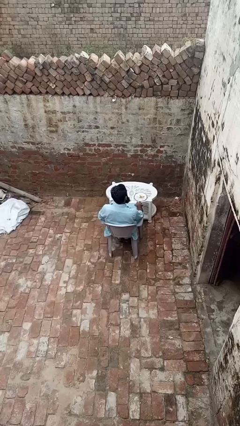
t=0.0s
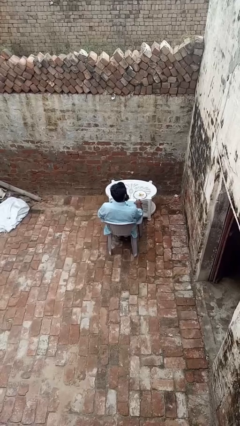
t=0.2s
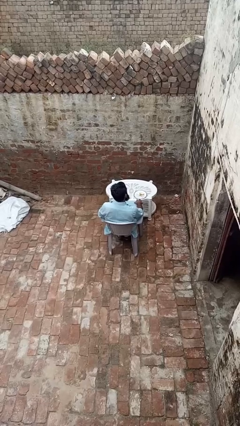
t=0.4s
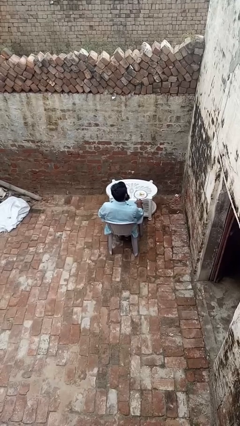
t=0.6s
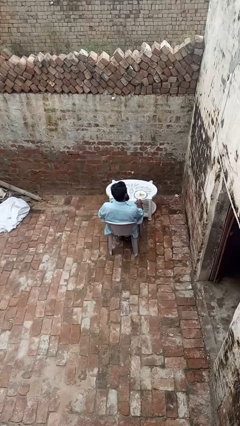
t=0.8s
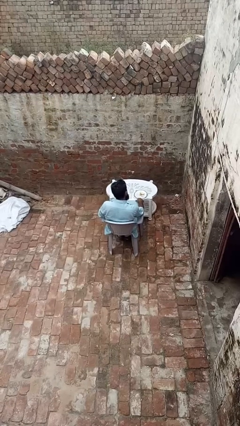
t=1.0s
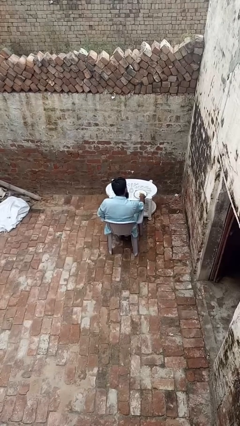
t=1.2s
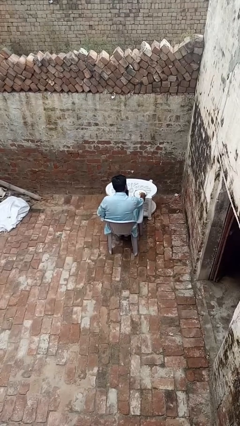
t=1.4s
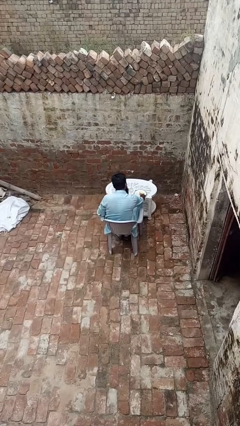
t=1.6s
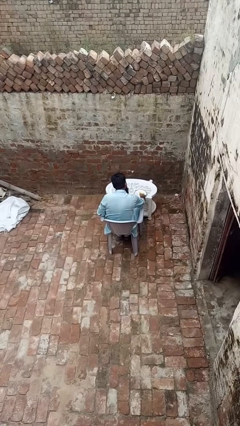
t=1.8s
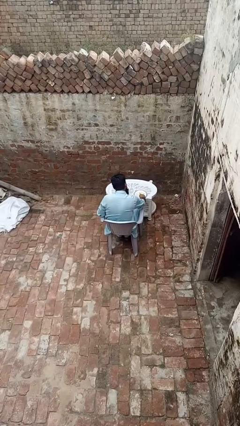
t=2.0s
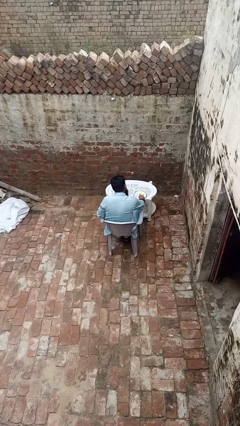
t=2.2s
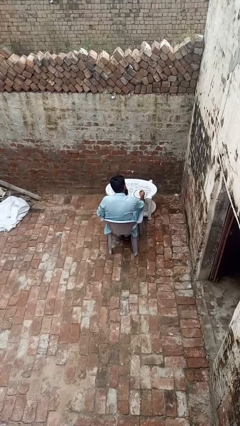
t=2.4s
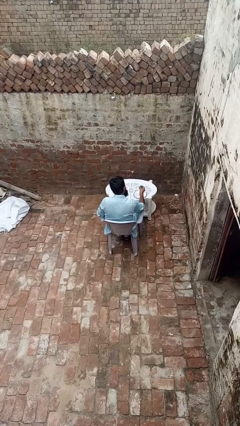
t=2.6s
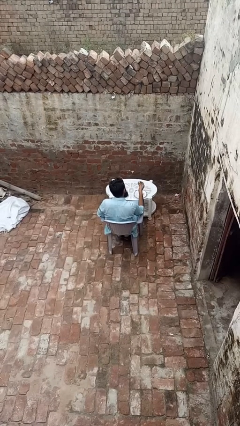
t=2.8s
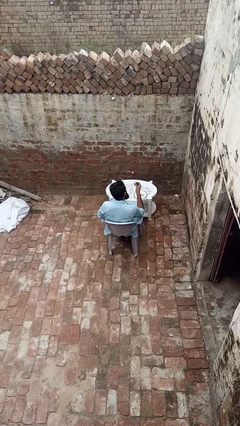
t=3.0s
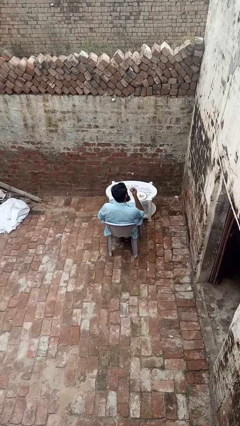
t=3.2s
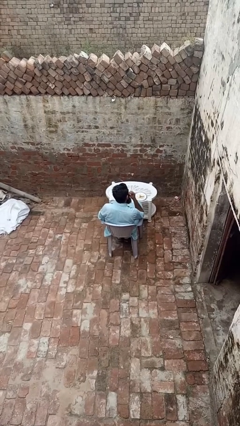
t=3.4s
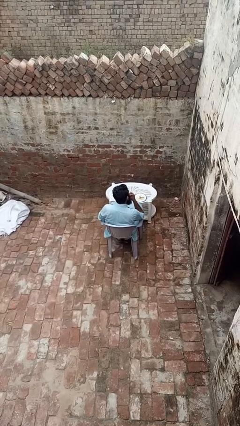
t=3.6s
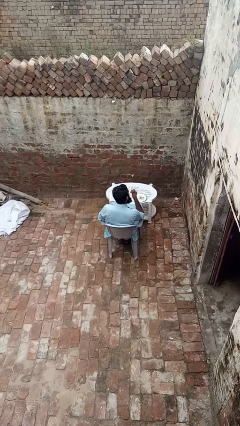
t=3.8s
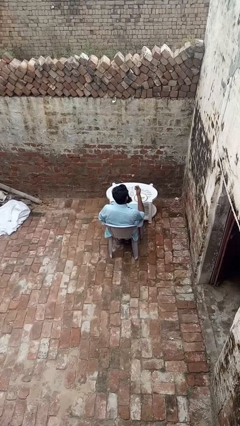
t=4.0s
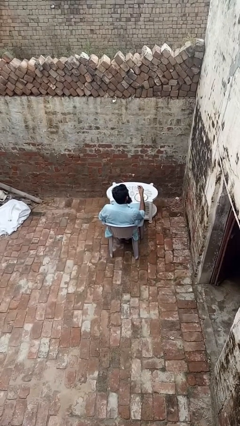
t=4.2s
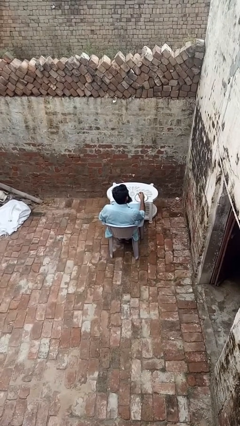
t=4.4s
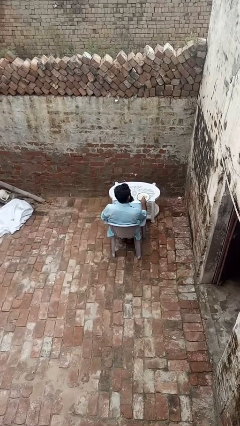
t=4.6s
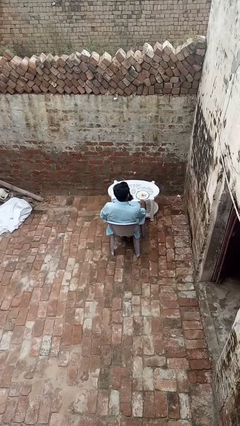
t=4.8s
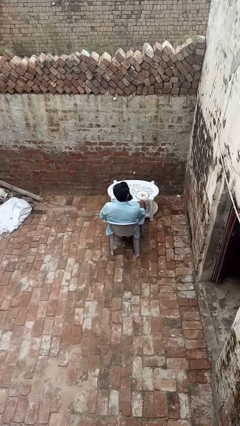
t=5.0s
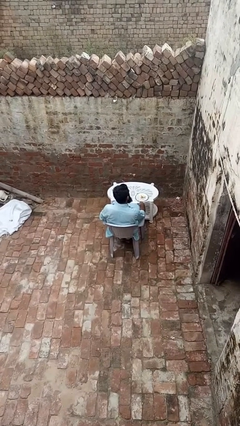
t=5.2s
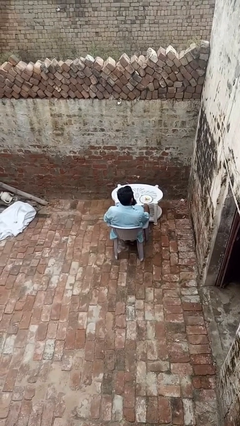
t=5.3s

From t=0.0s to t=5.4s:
person eats with hands

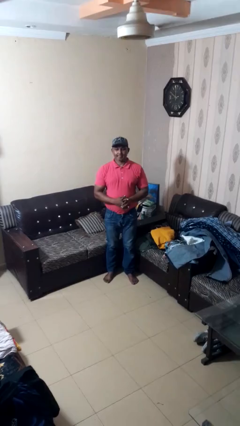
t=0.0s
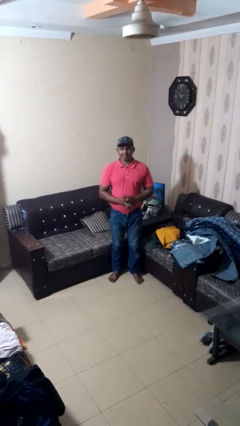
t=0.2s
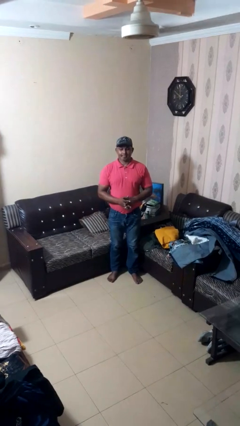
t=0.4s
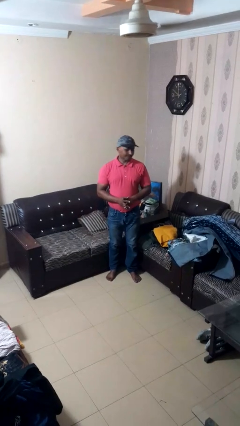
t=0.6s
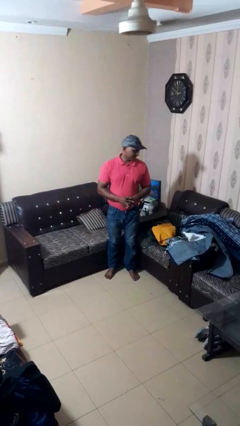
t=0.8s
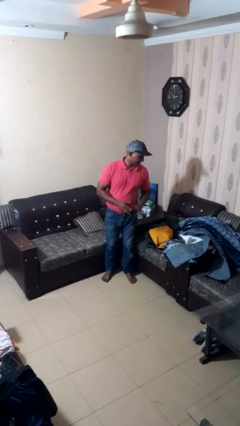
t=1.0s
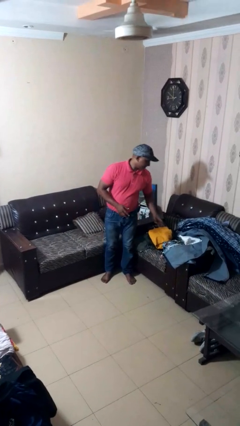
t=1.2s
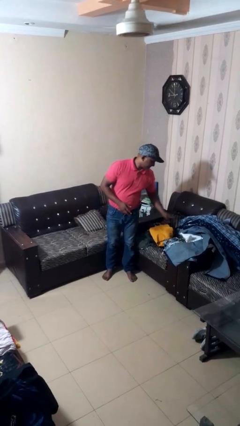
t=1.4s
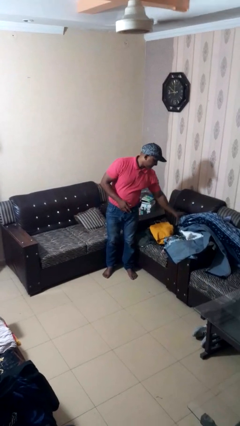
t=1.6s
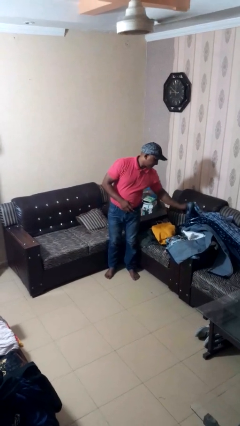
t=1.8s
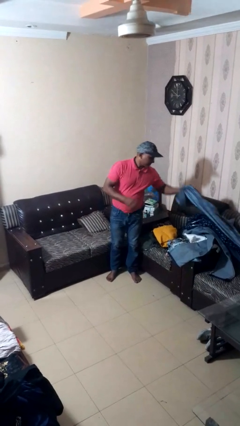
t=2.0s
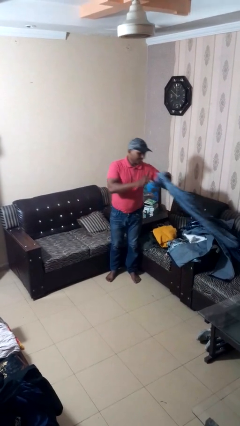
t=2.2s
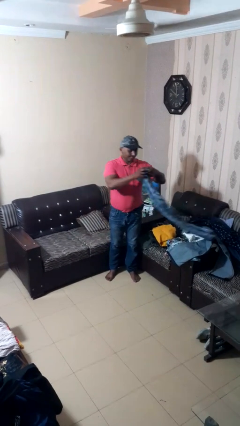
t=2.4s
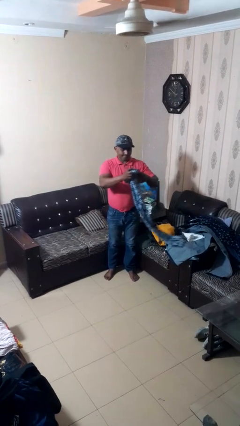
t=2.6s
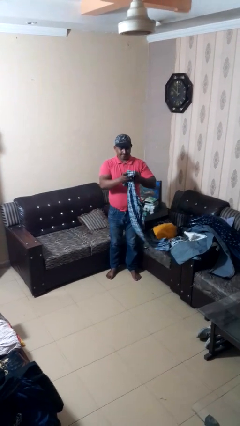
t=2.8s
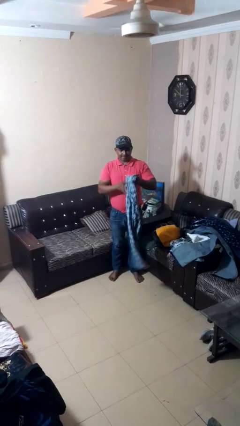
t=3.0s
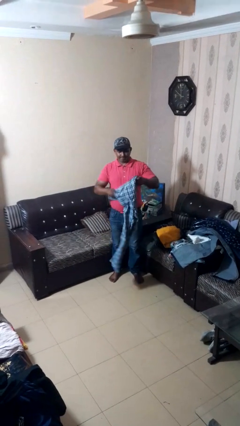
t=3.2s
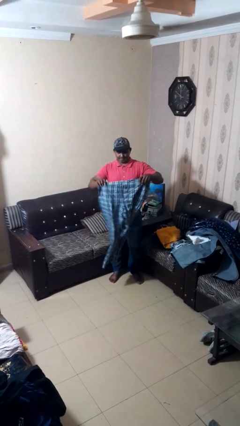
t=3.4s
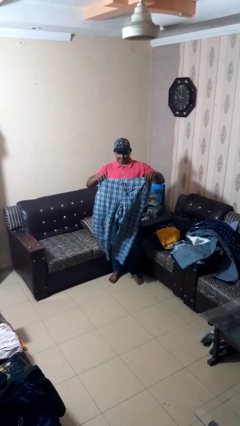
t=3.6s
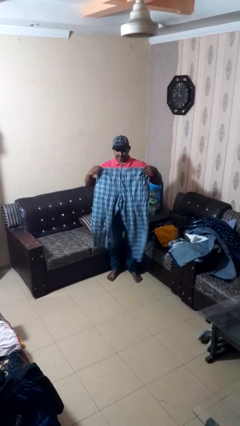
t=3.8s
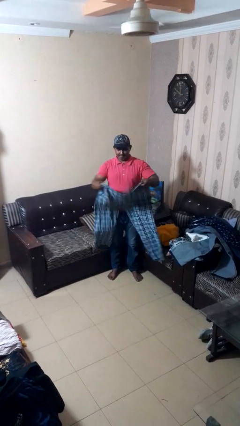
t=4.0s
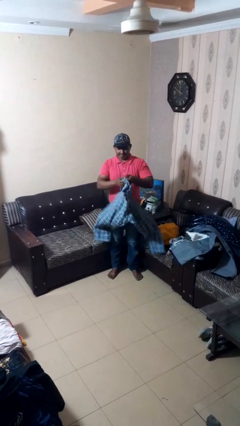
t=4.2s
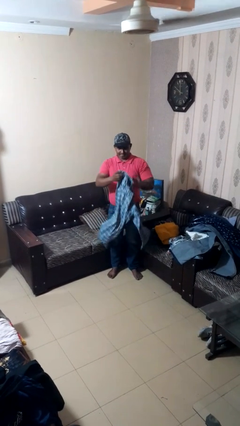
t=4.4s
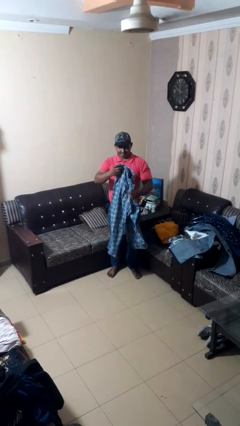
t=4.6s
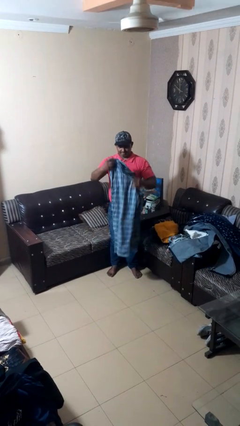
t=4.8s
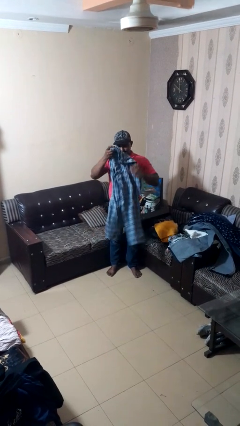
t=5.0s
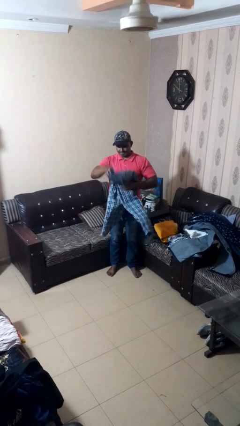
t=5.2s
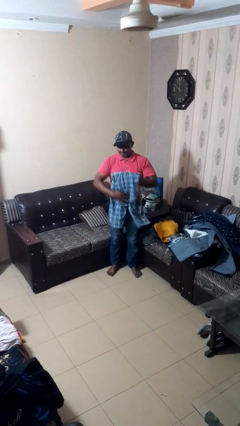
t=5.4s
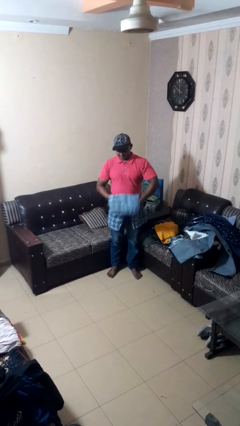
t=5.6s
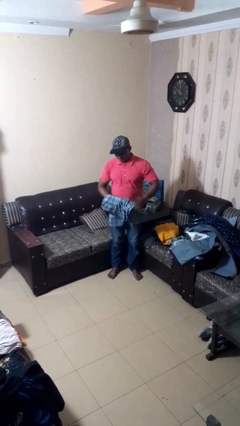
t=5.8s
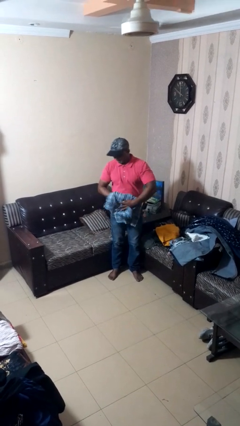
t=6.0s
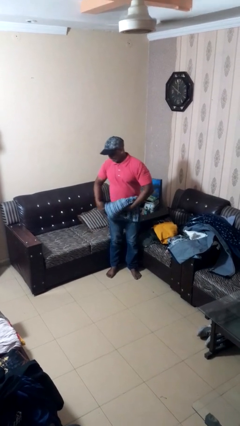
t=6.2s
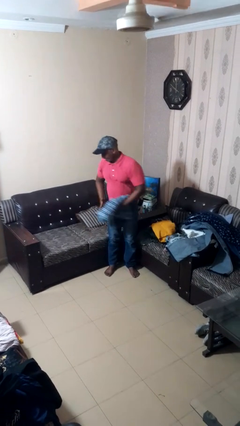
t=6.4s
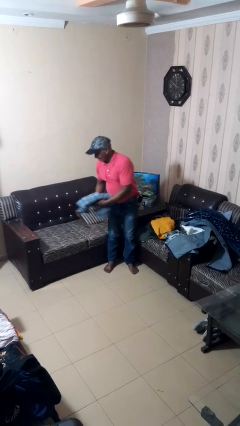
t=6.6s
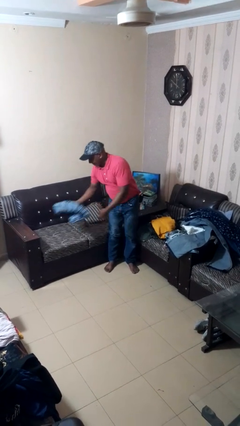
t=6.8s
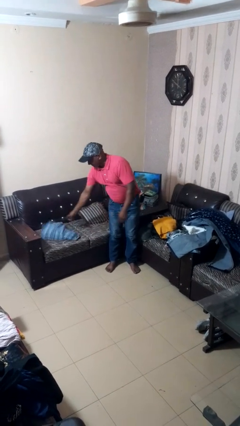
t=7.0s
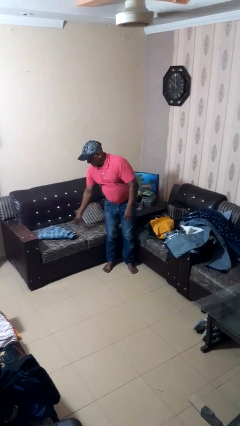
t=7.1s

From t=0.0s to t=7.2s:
person folds pants

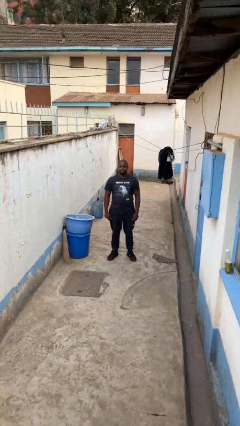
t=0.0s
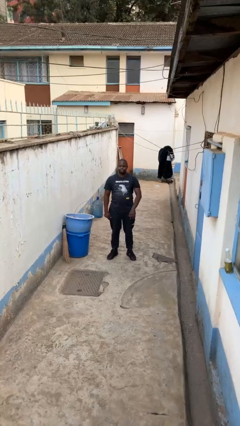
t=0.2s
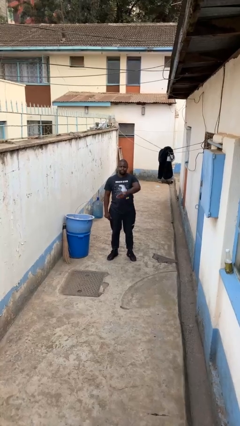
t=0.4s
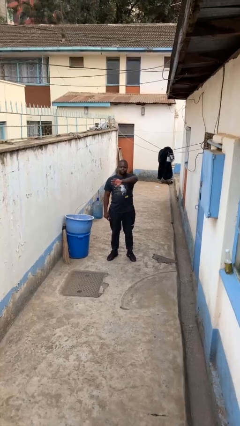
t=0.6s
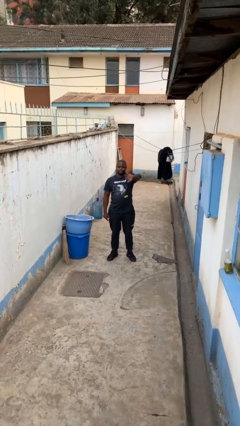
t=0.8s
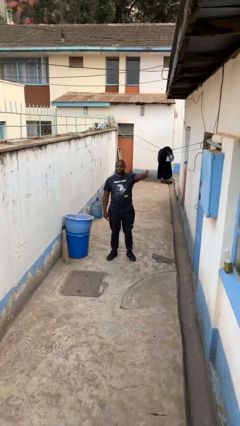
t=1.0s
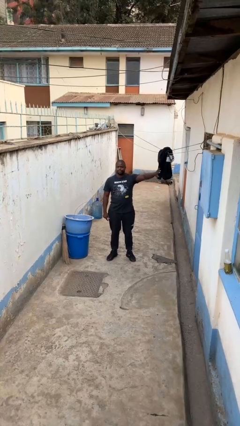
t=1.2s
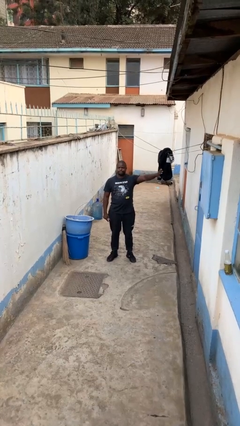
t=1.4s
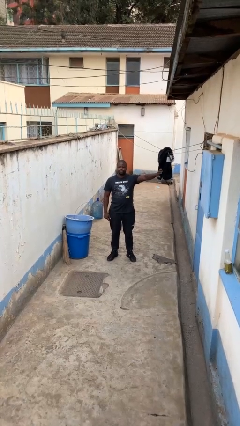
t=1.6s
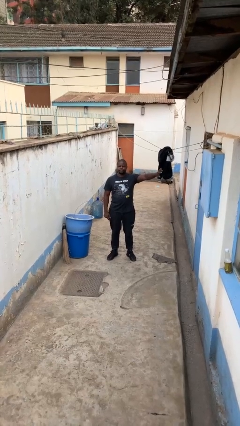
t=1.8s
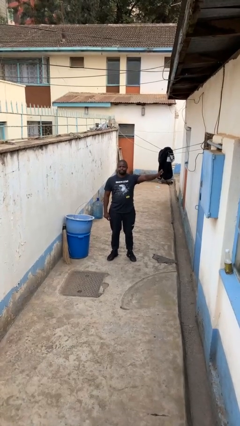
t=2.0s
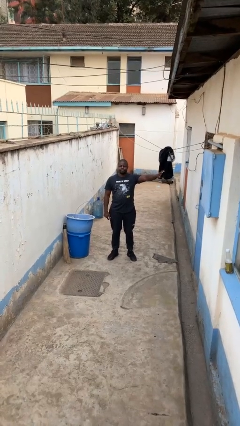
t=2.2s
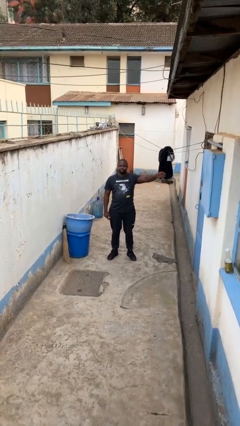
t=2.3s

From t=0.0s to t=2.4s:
person gestures swipe left

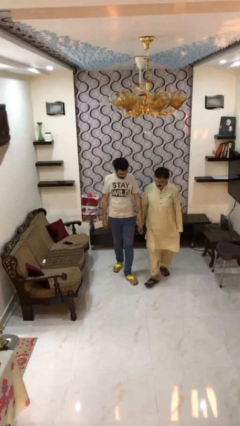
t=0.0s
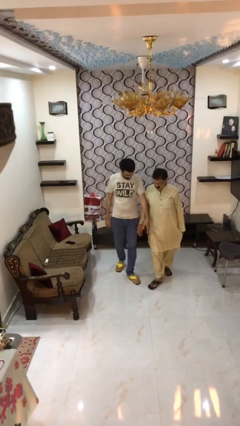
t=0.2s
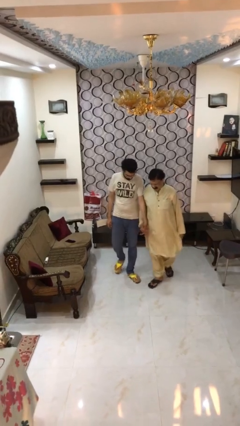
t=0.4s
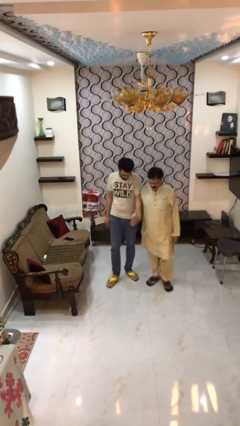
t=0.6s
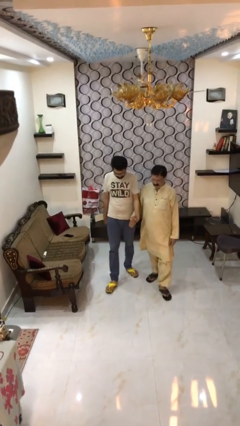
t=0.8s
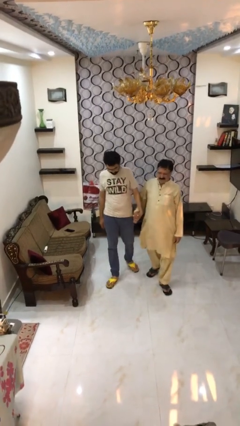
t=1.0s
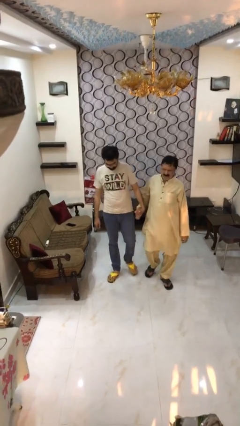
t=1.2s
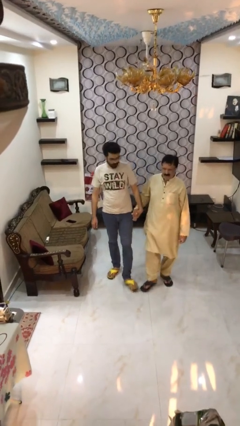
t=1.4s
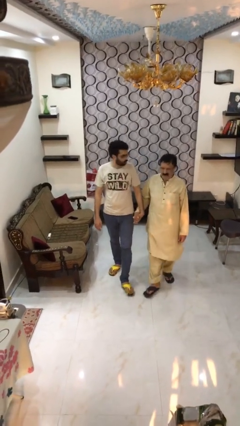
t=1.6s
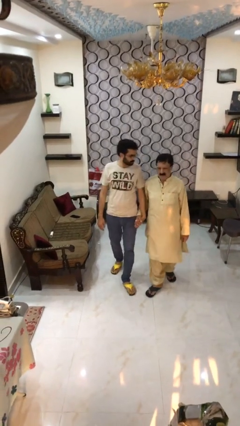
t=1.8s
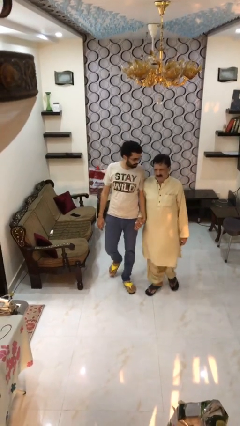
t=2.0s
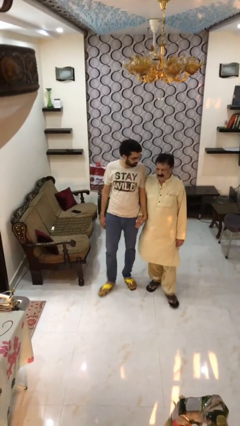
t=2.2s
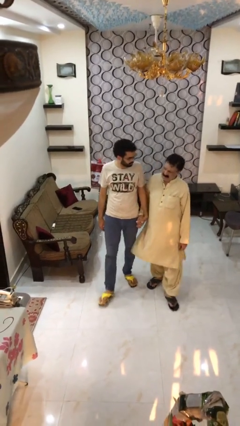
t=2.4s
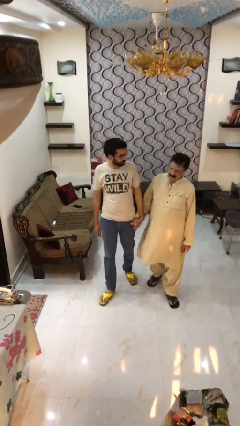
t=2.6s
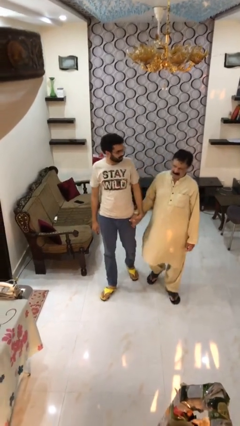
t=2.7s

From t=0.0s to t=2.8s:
person holds hand
